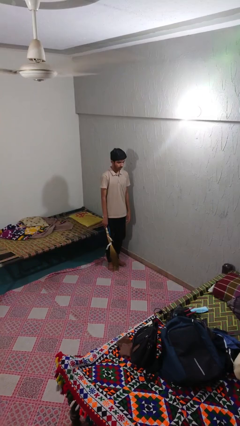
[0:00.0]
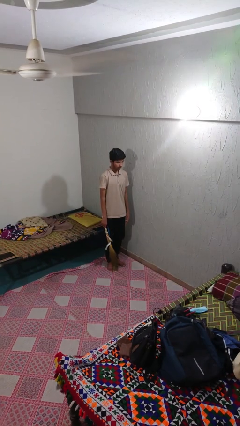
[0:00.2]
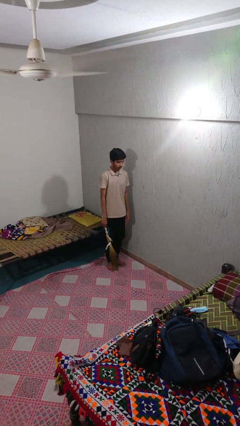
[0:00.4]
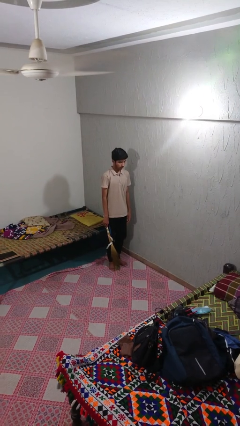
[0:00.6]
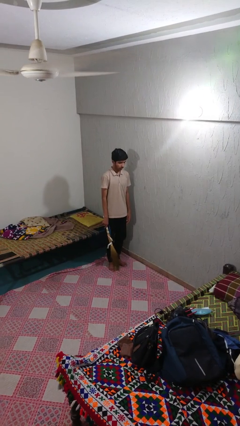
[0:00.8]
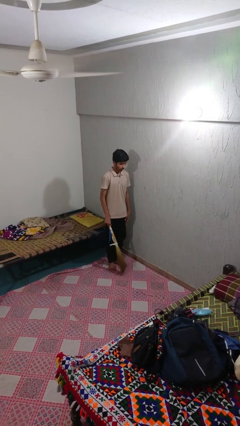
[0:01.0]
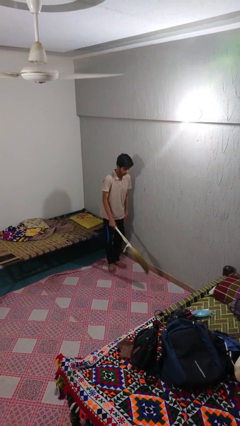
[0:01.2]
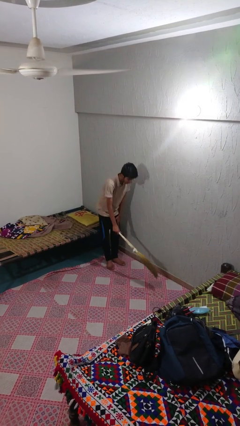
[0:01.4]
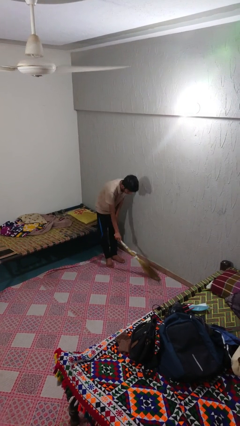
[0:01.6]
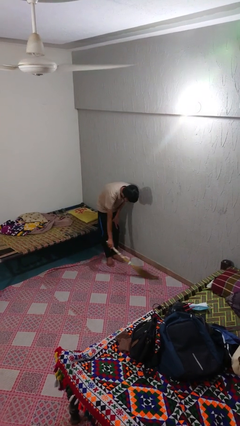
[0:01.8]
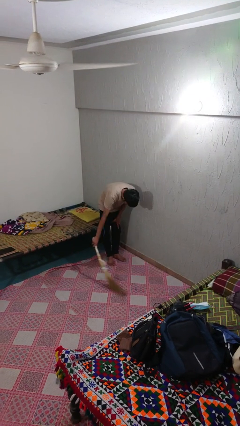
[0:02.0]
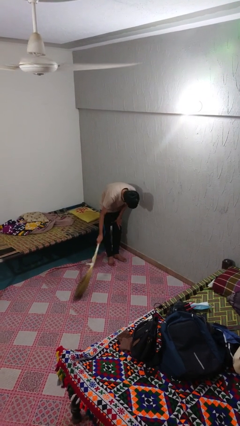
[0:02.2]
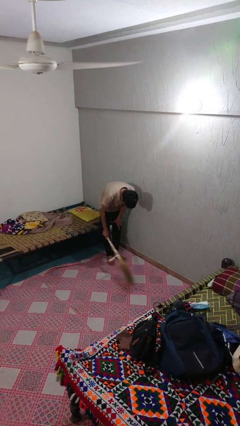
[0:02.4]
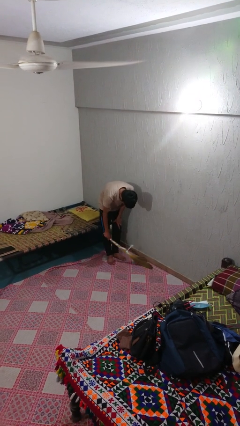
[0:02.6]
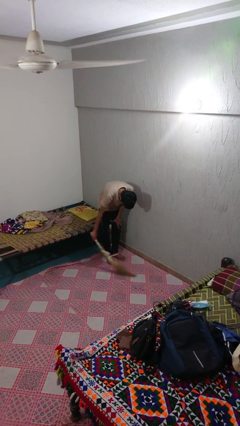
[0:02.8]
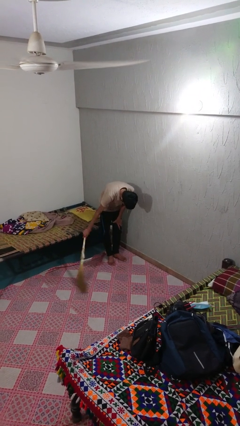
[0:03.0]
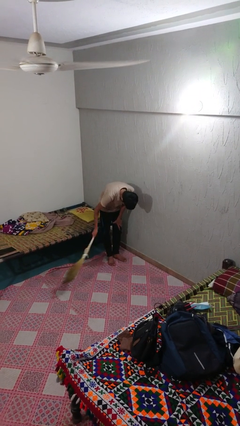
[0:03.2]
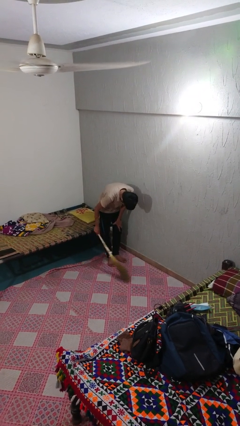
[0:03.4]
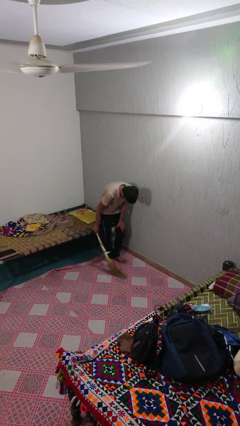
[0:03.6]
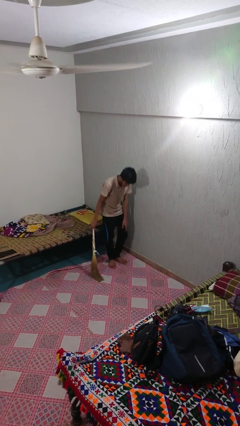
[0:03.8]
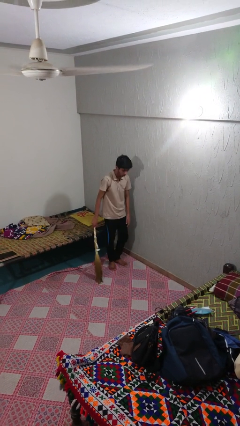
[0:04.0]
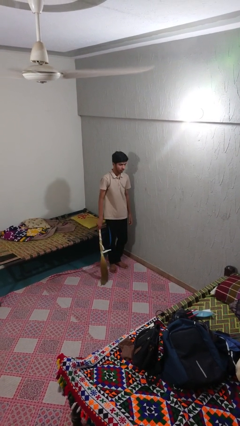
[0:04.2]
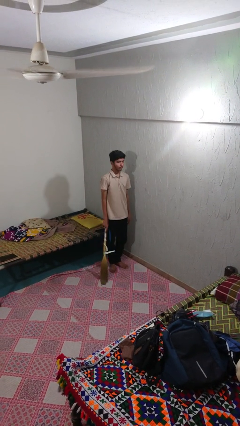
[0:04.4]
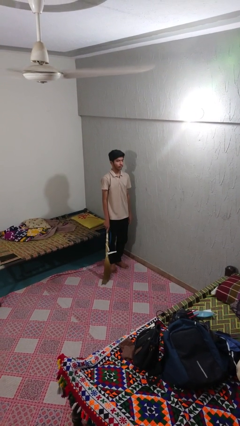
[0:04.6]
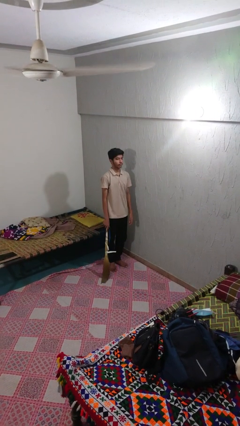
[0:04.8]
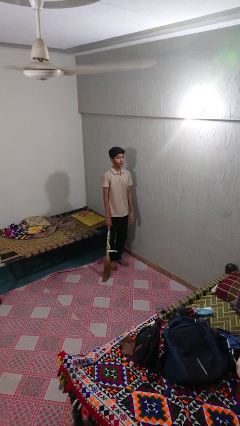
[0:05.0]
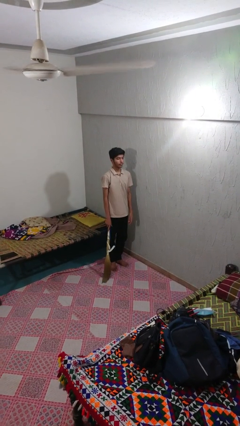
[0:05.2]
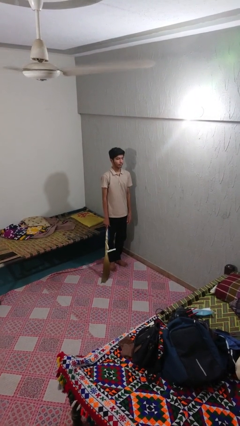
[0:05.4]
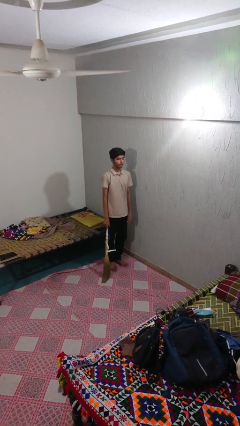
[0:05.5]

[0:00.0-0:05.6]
person sweeps floor

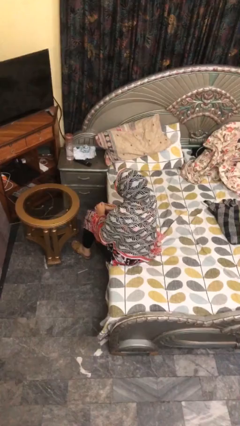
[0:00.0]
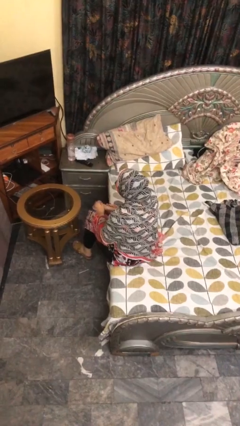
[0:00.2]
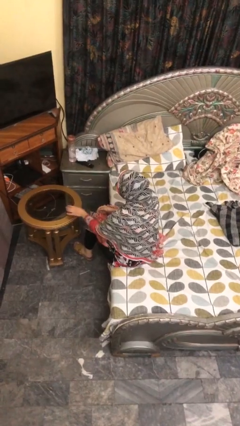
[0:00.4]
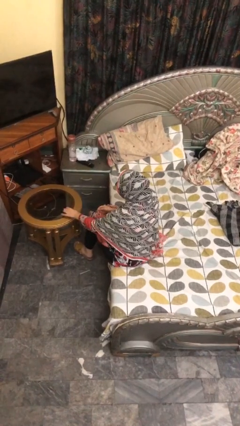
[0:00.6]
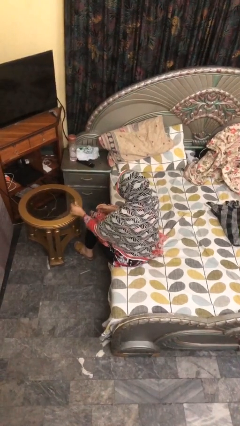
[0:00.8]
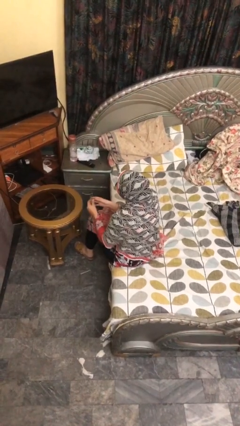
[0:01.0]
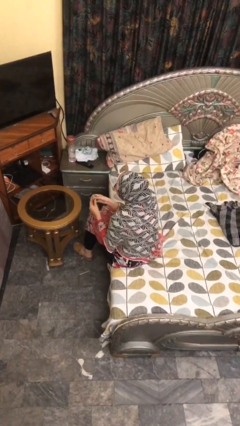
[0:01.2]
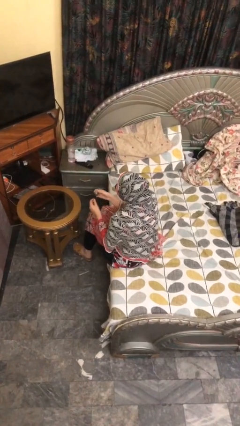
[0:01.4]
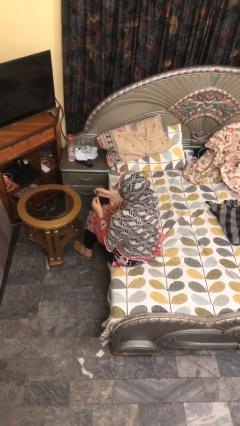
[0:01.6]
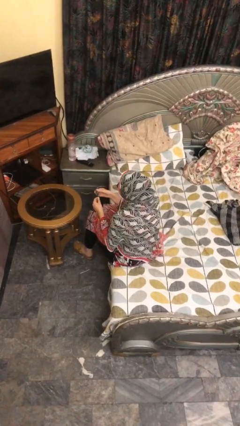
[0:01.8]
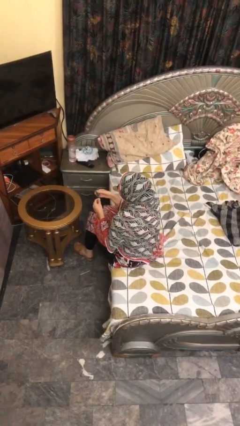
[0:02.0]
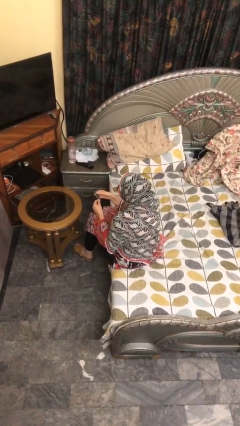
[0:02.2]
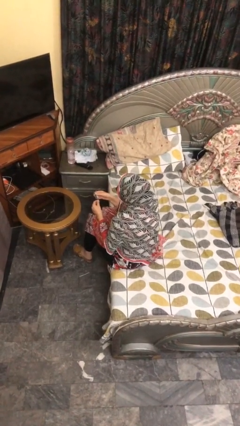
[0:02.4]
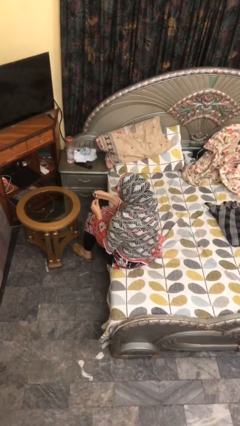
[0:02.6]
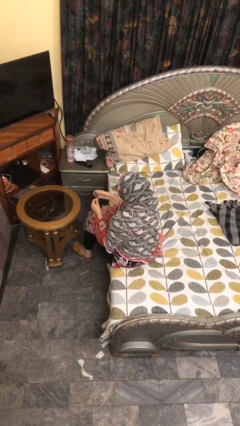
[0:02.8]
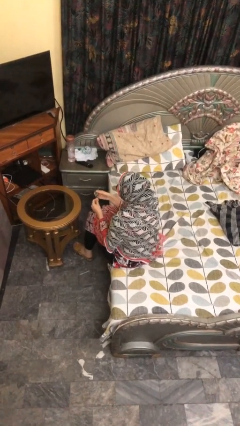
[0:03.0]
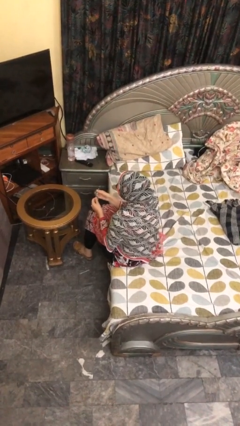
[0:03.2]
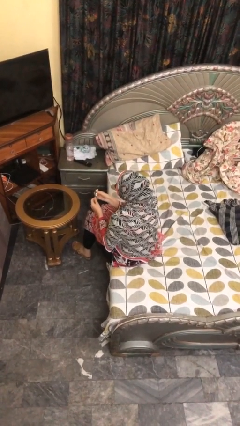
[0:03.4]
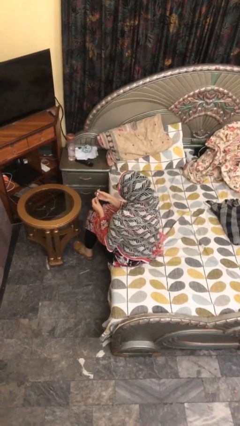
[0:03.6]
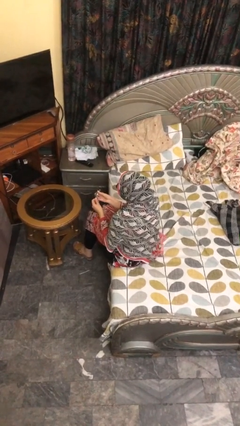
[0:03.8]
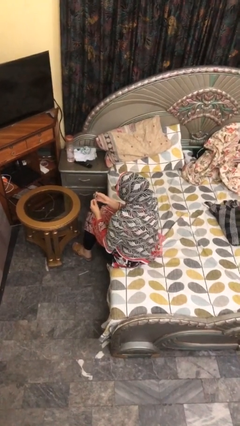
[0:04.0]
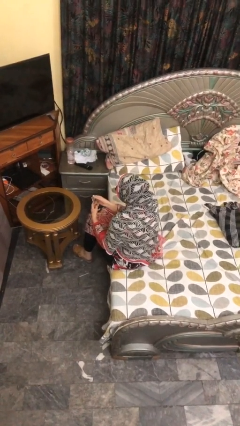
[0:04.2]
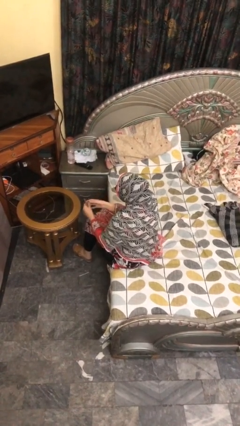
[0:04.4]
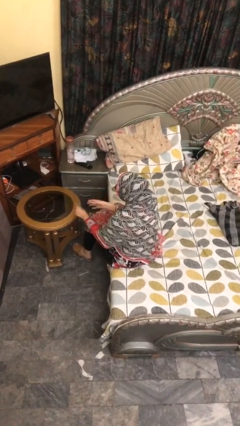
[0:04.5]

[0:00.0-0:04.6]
person clips fingernails

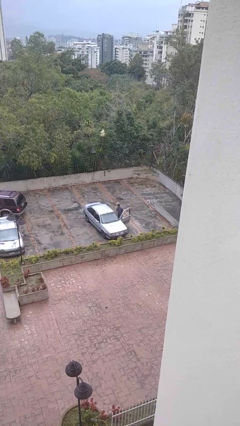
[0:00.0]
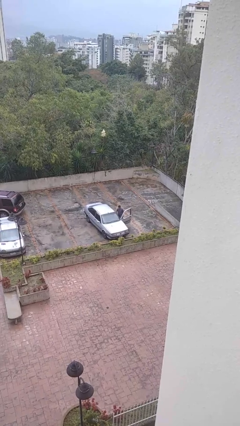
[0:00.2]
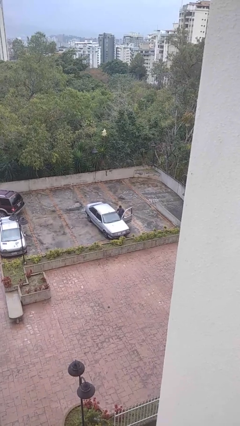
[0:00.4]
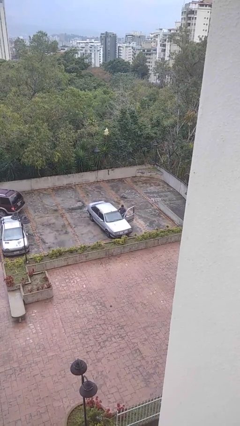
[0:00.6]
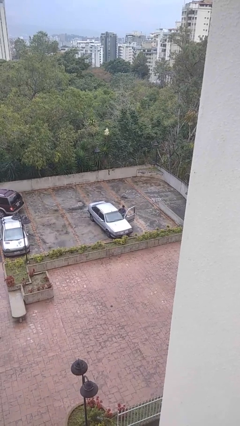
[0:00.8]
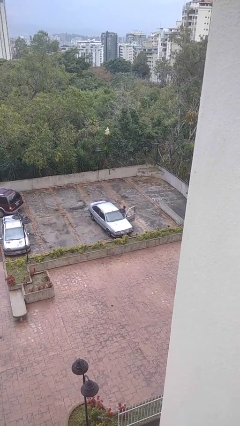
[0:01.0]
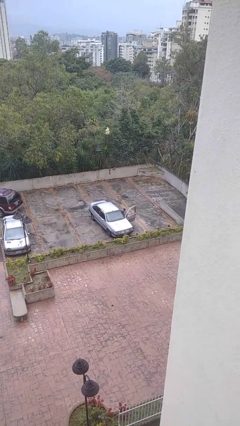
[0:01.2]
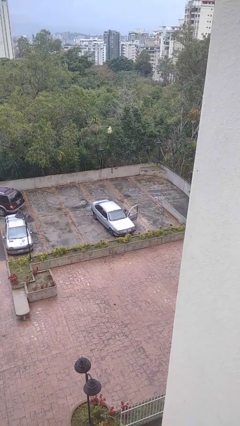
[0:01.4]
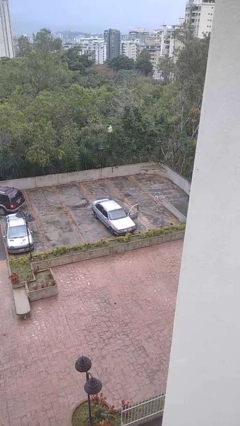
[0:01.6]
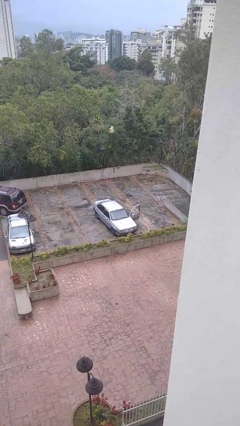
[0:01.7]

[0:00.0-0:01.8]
person enters car

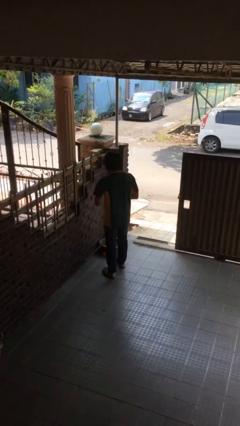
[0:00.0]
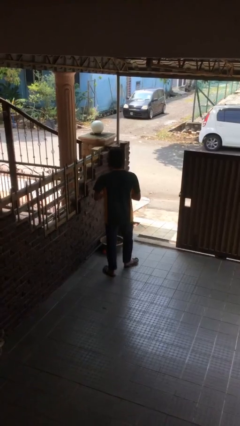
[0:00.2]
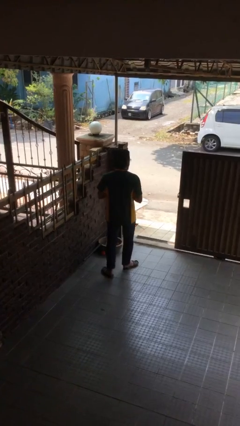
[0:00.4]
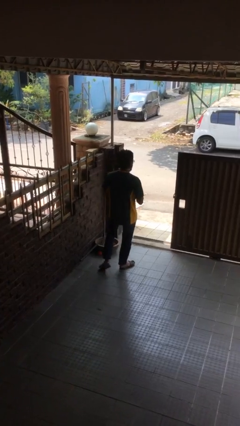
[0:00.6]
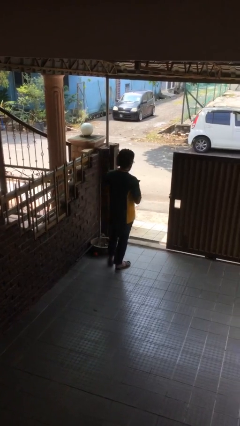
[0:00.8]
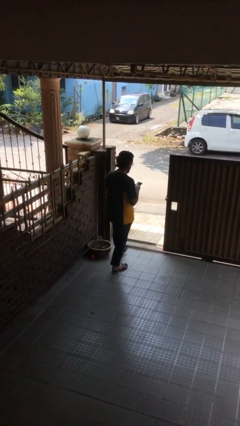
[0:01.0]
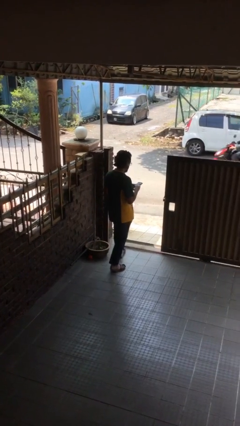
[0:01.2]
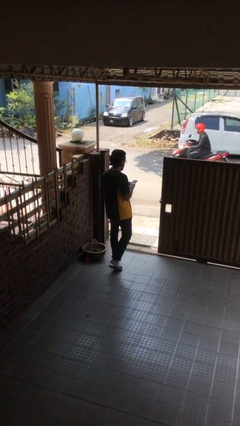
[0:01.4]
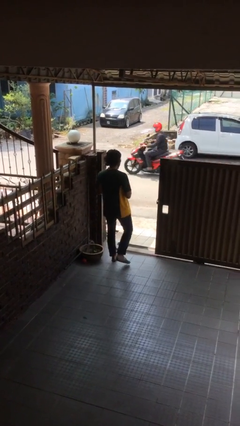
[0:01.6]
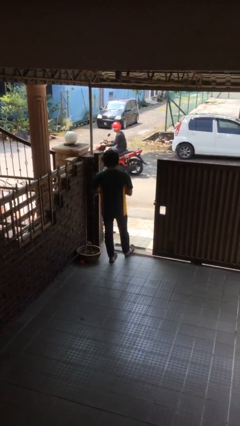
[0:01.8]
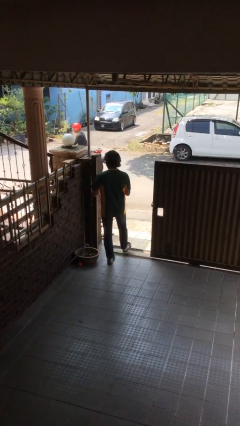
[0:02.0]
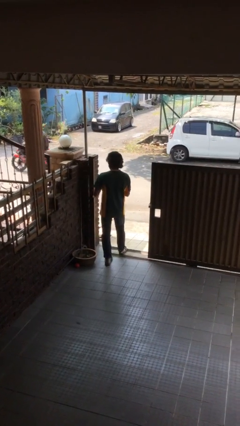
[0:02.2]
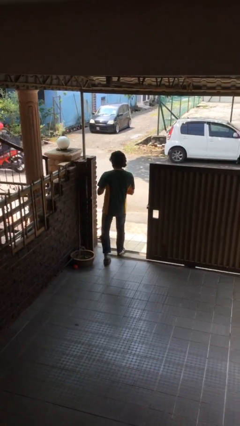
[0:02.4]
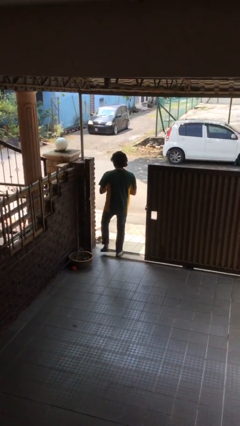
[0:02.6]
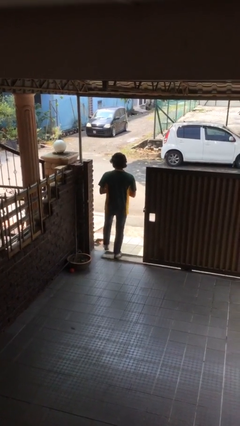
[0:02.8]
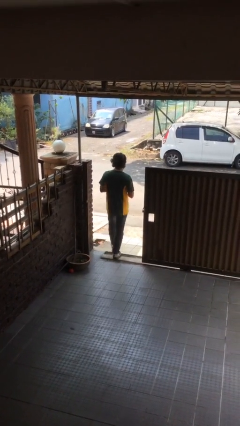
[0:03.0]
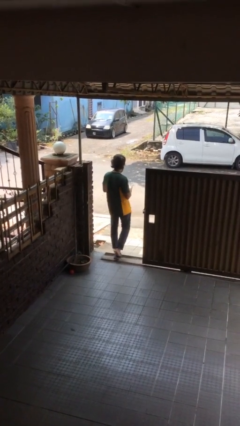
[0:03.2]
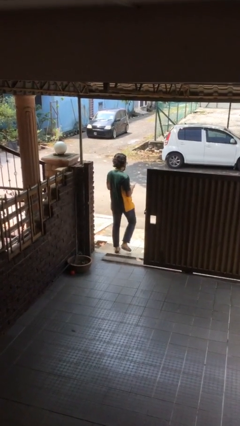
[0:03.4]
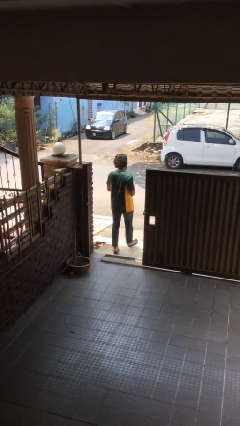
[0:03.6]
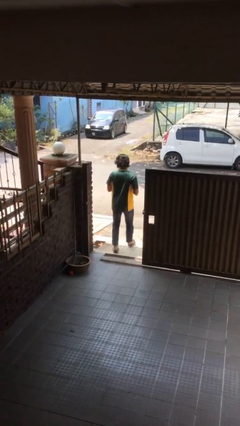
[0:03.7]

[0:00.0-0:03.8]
person exits scene through structure

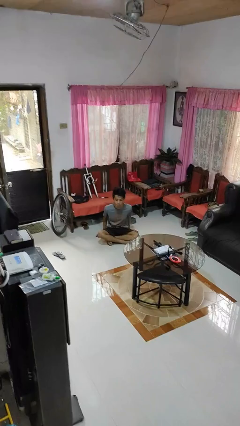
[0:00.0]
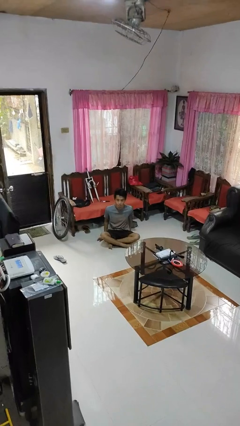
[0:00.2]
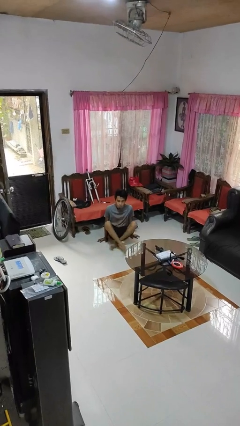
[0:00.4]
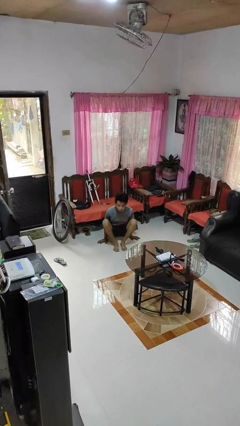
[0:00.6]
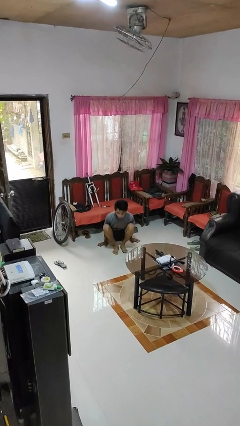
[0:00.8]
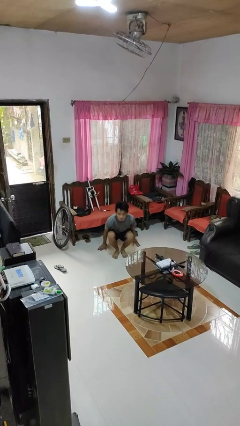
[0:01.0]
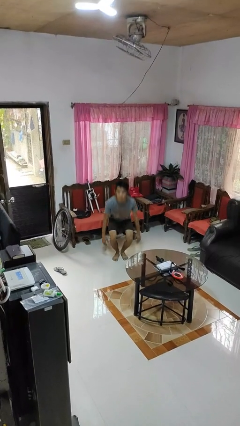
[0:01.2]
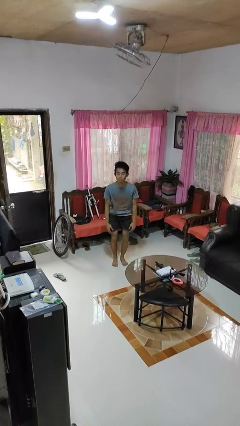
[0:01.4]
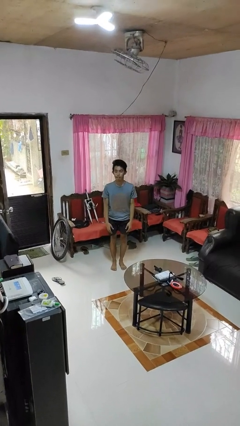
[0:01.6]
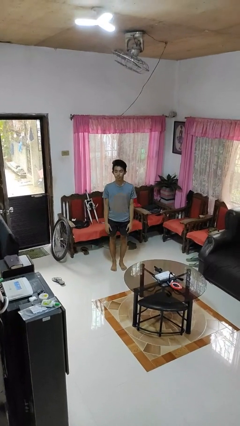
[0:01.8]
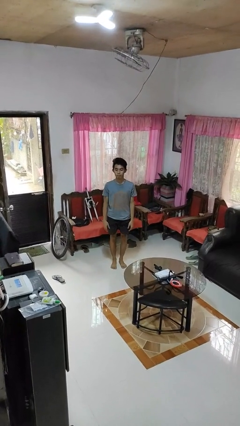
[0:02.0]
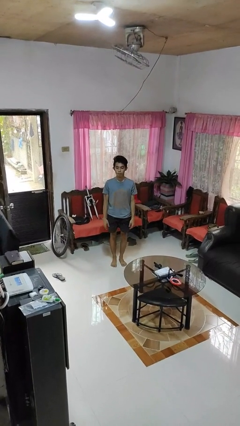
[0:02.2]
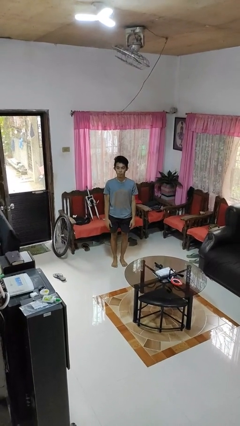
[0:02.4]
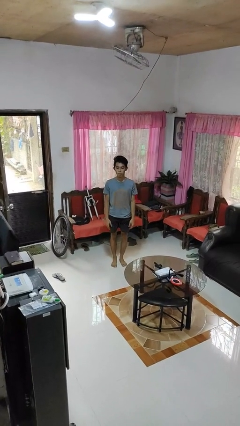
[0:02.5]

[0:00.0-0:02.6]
person stands up from floor
